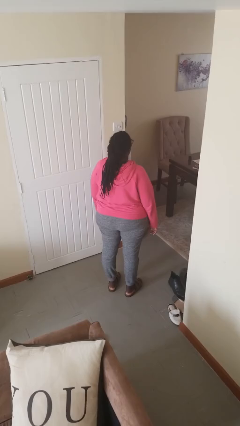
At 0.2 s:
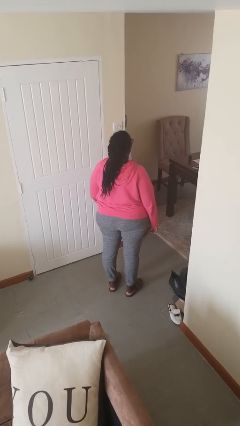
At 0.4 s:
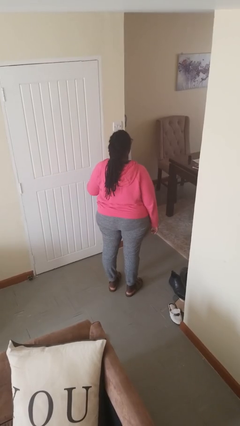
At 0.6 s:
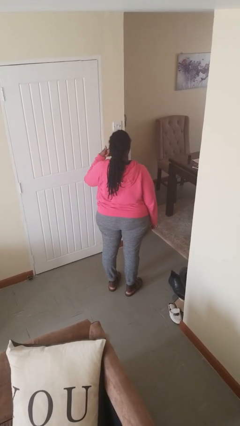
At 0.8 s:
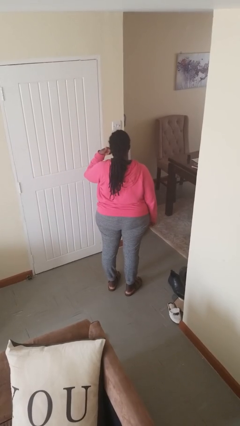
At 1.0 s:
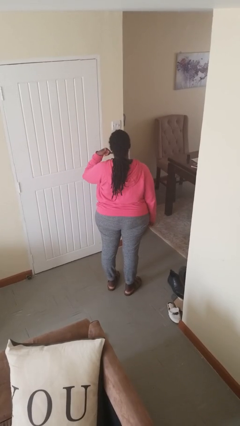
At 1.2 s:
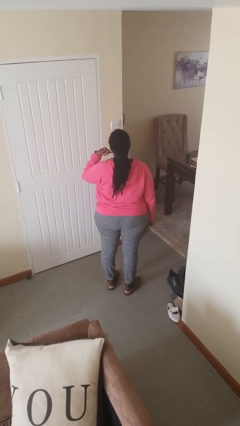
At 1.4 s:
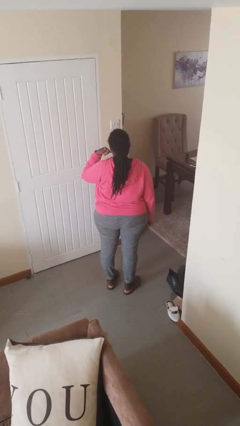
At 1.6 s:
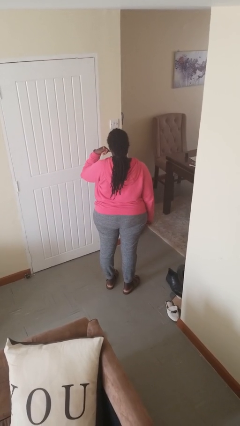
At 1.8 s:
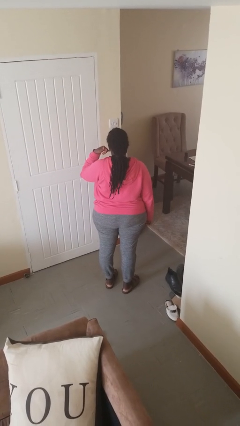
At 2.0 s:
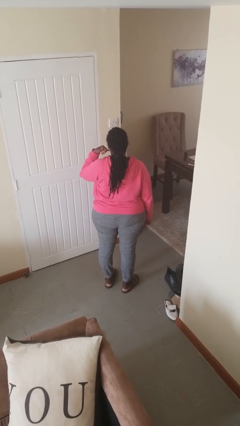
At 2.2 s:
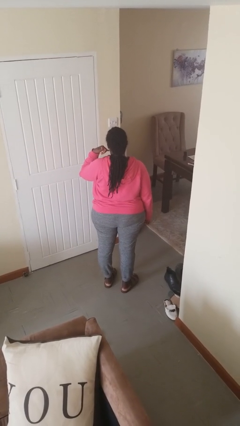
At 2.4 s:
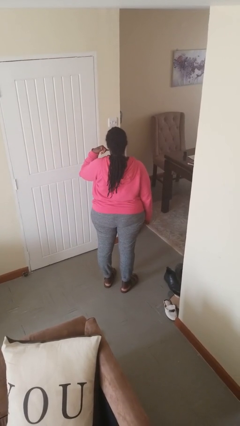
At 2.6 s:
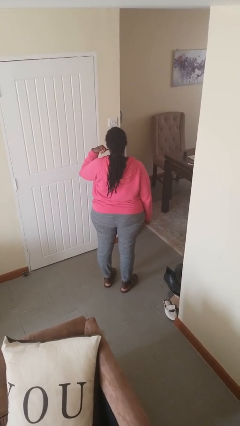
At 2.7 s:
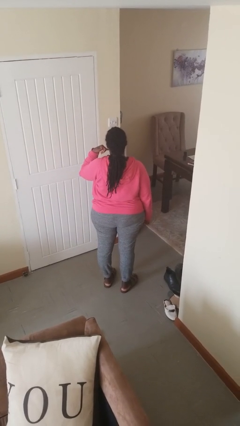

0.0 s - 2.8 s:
person gestures call me

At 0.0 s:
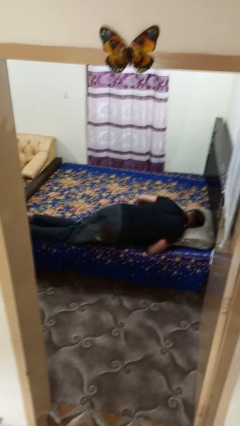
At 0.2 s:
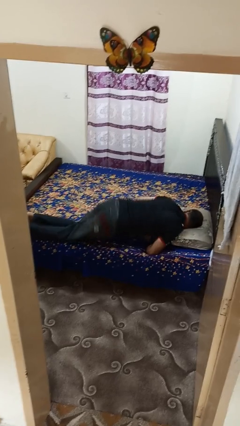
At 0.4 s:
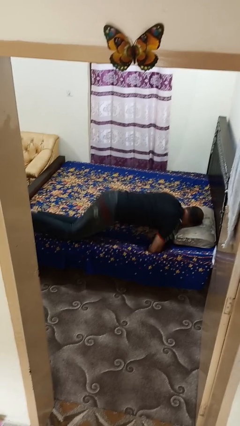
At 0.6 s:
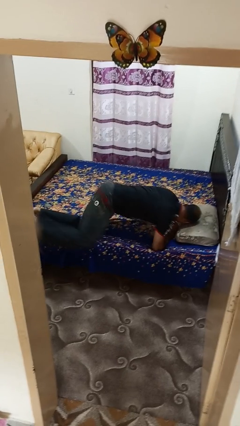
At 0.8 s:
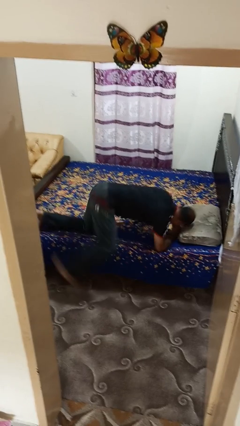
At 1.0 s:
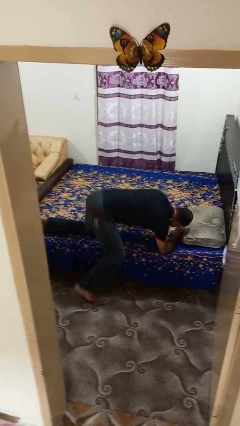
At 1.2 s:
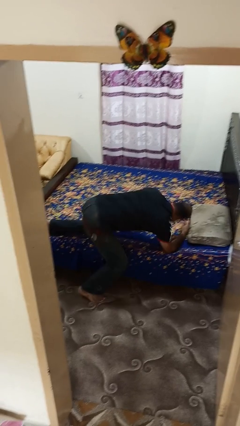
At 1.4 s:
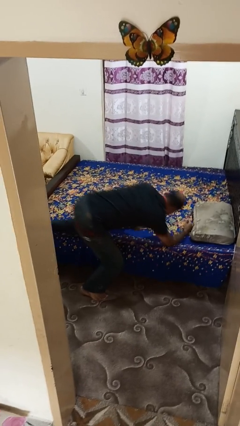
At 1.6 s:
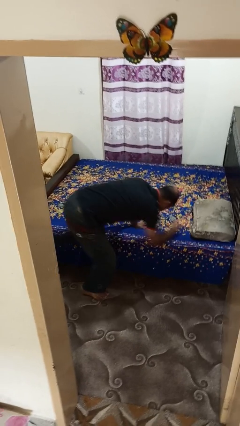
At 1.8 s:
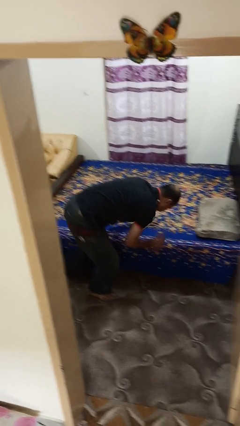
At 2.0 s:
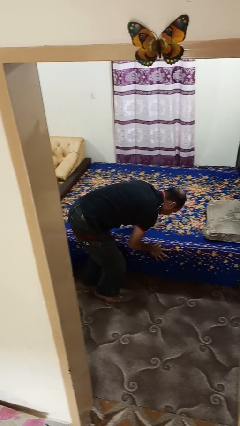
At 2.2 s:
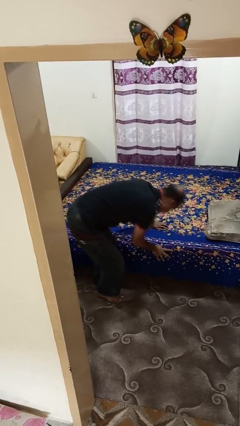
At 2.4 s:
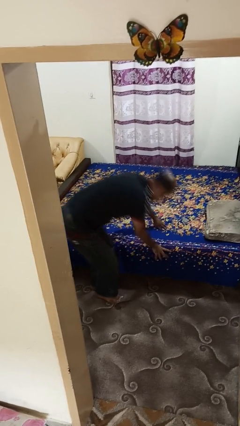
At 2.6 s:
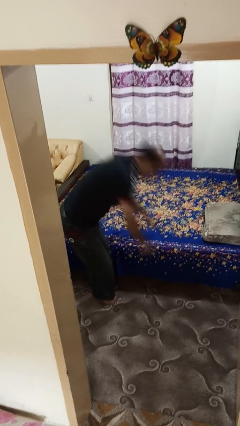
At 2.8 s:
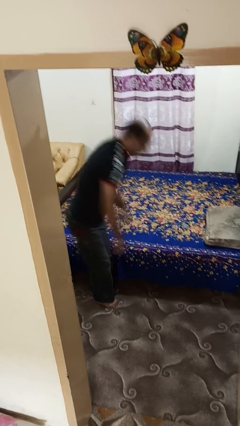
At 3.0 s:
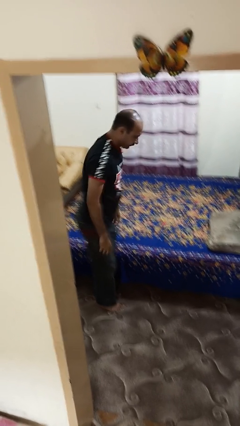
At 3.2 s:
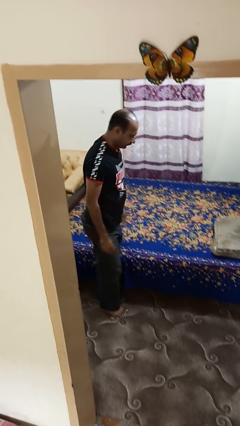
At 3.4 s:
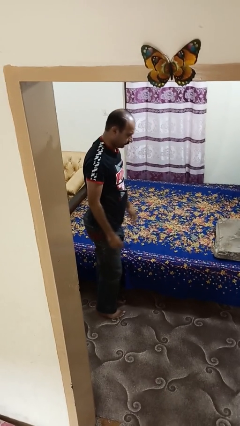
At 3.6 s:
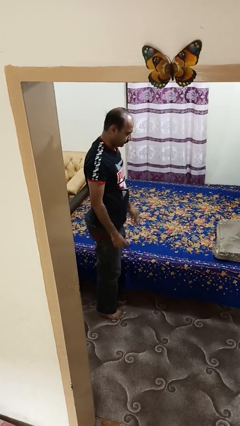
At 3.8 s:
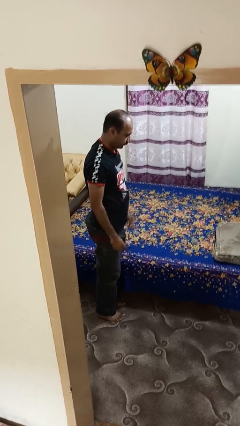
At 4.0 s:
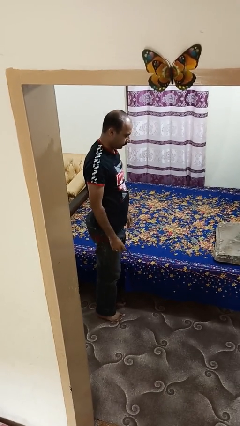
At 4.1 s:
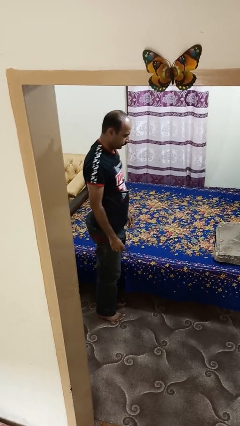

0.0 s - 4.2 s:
person stands up

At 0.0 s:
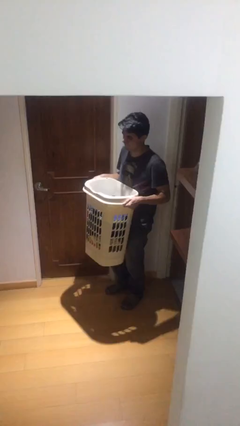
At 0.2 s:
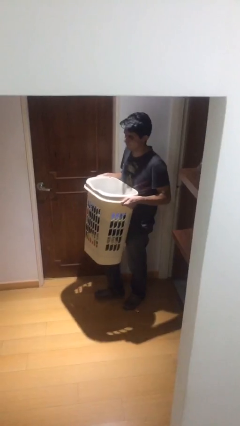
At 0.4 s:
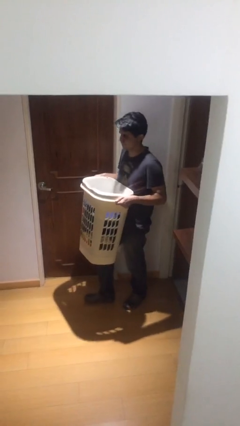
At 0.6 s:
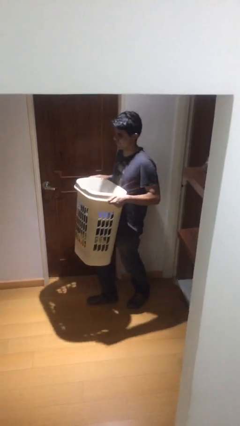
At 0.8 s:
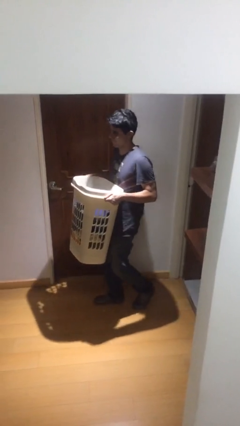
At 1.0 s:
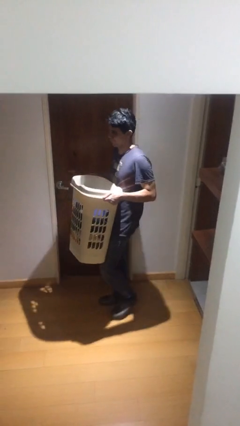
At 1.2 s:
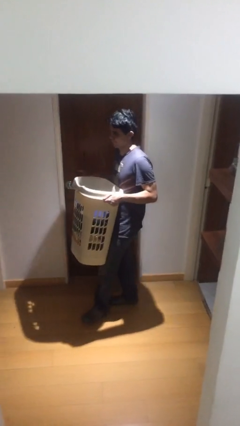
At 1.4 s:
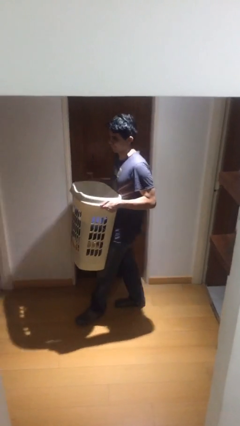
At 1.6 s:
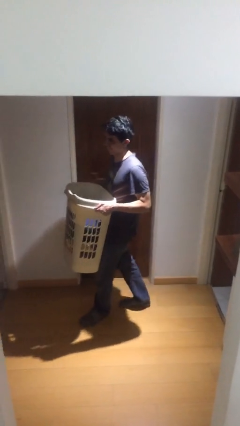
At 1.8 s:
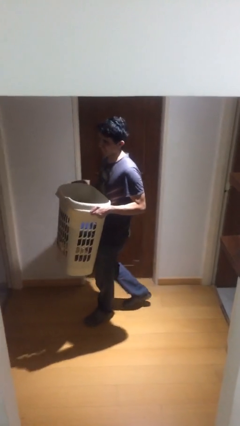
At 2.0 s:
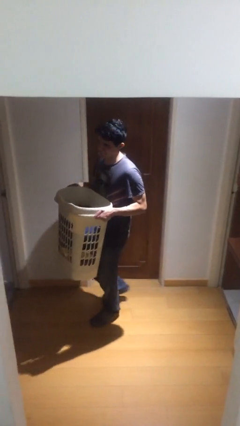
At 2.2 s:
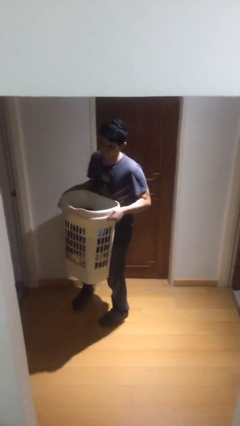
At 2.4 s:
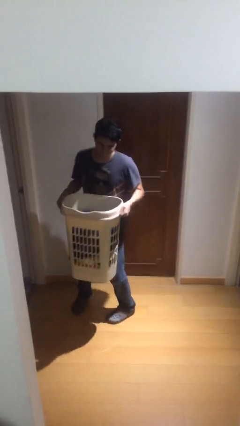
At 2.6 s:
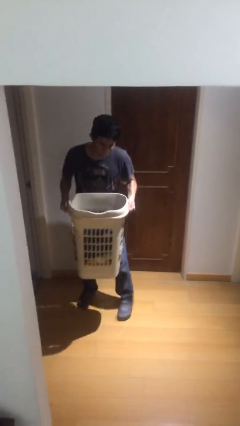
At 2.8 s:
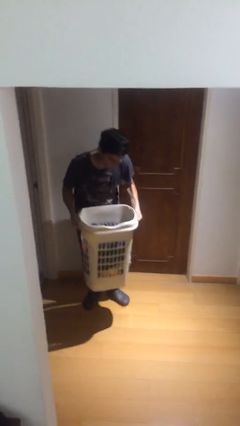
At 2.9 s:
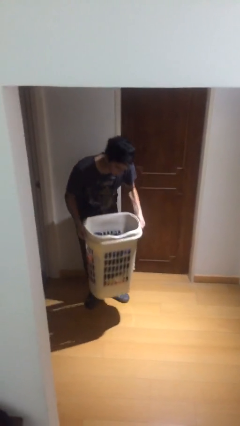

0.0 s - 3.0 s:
person carries heavy object

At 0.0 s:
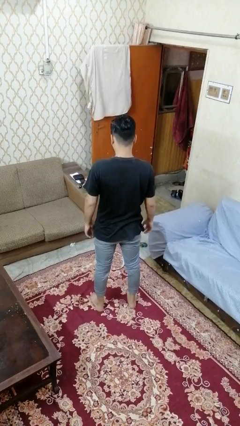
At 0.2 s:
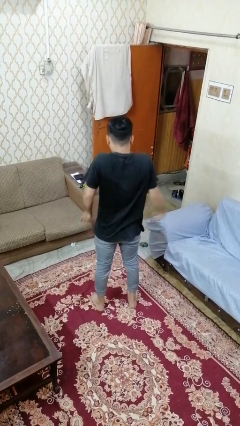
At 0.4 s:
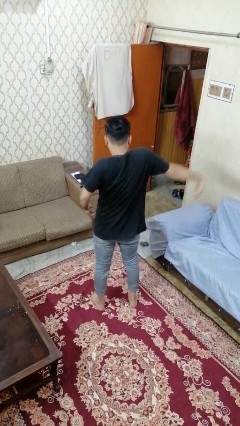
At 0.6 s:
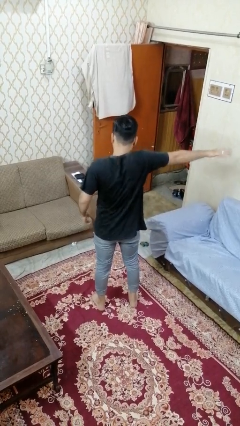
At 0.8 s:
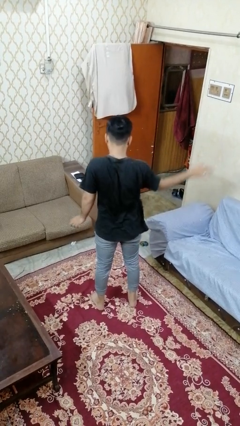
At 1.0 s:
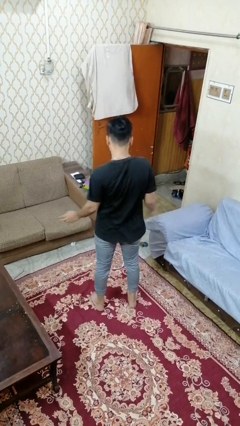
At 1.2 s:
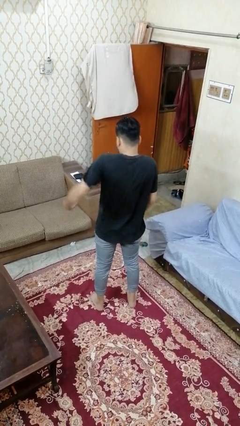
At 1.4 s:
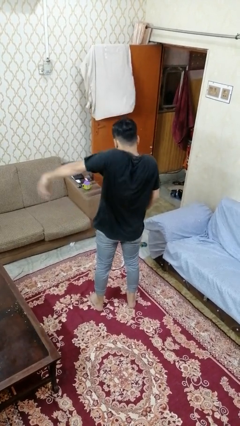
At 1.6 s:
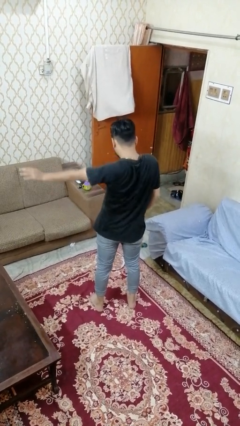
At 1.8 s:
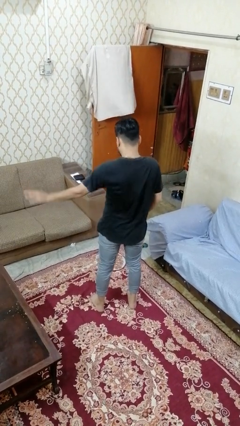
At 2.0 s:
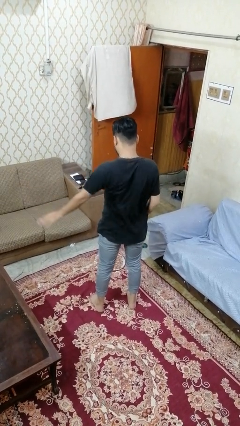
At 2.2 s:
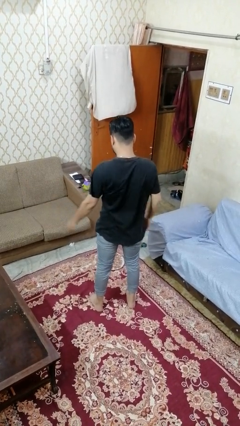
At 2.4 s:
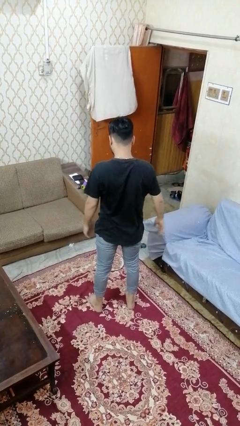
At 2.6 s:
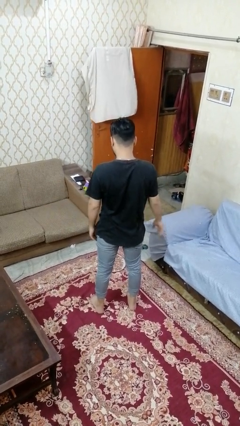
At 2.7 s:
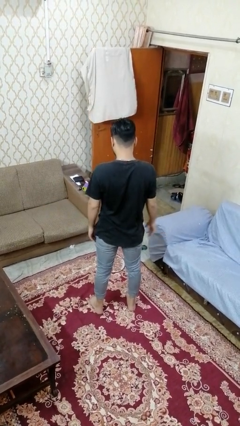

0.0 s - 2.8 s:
person dances in place

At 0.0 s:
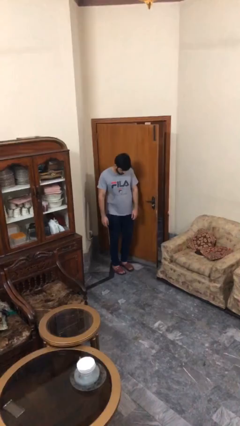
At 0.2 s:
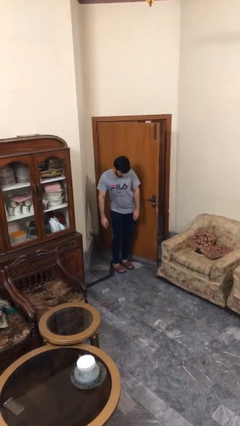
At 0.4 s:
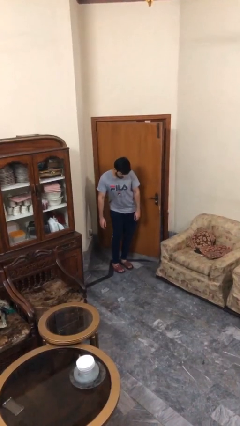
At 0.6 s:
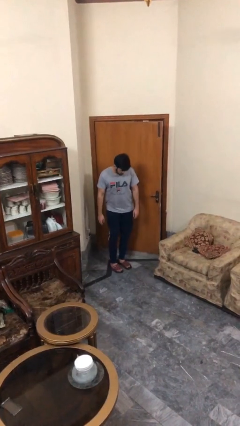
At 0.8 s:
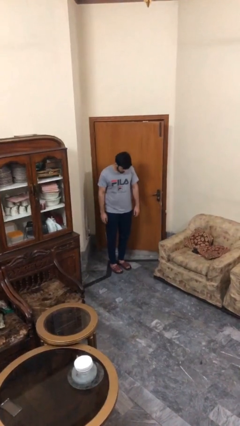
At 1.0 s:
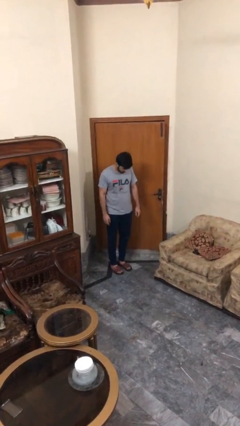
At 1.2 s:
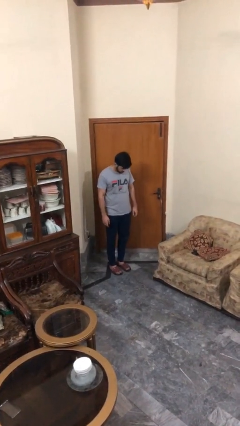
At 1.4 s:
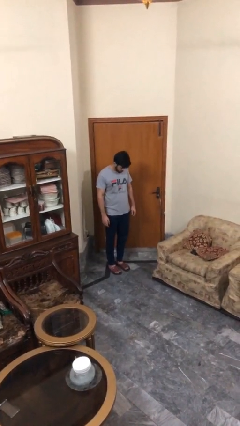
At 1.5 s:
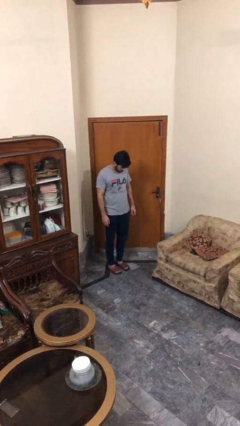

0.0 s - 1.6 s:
person closes door with hip

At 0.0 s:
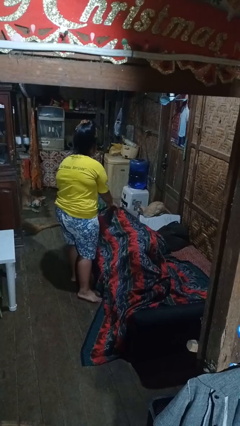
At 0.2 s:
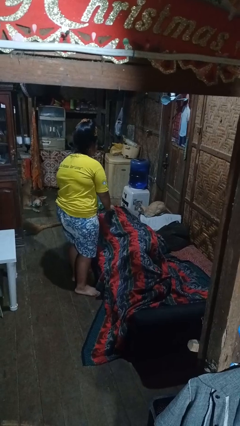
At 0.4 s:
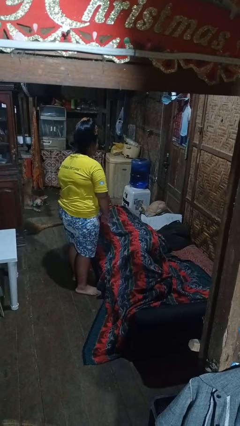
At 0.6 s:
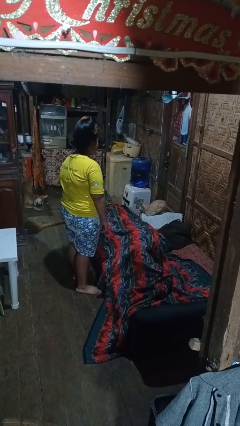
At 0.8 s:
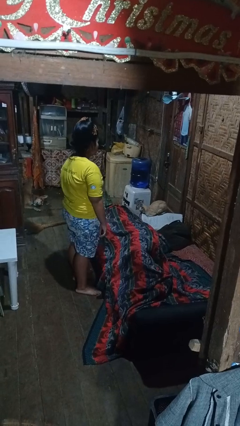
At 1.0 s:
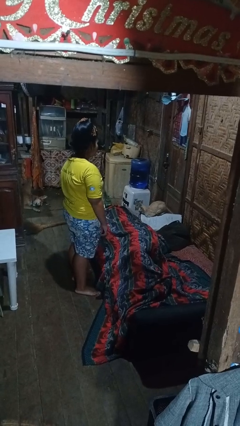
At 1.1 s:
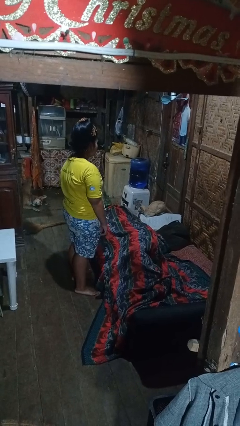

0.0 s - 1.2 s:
person covers friend with blanket

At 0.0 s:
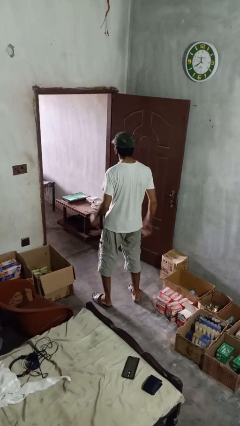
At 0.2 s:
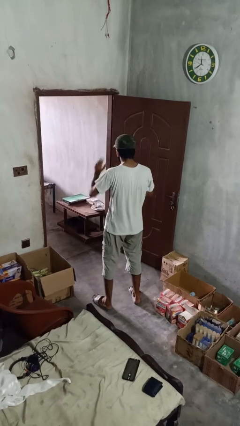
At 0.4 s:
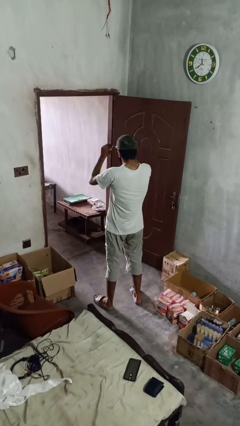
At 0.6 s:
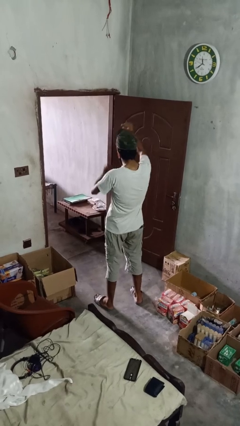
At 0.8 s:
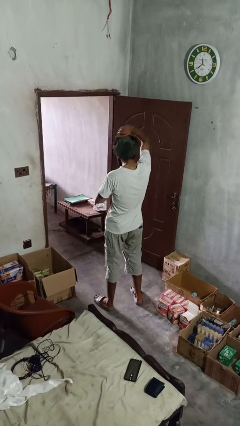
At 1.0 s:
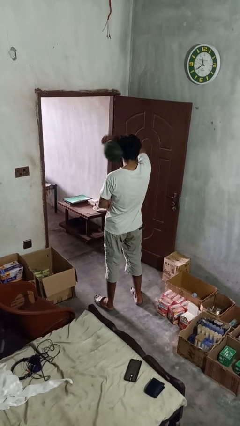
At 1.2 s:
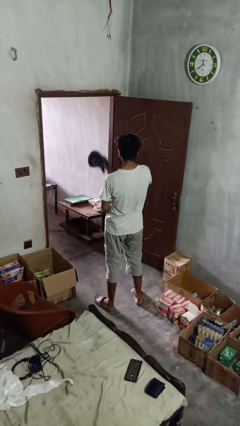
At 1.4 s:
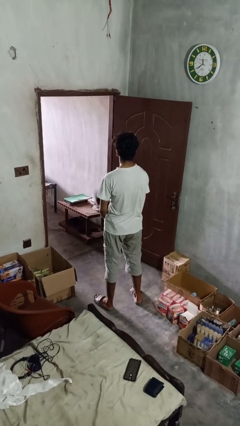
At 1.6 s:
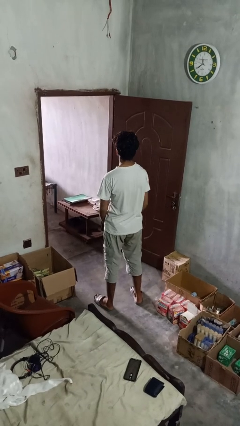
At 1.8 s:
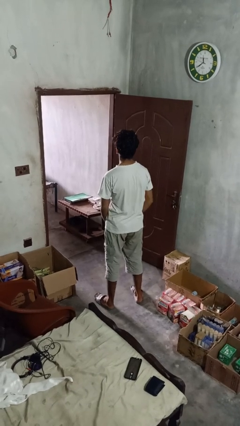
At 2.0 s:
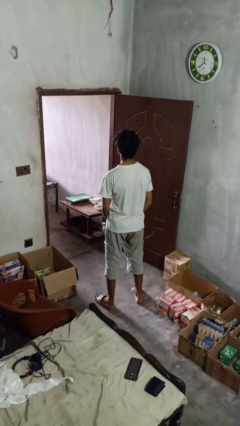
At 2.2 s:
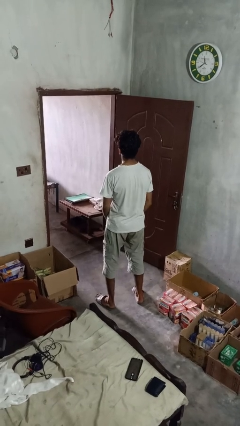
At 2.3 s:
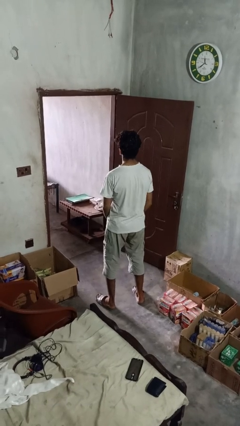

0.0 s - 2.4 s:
person takes off hat
